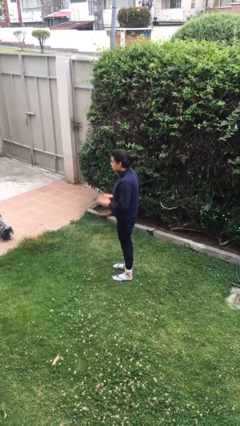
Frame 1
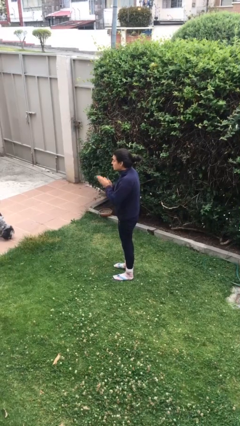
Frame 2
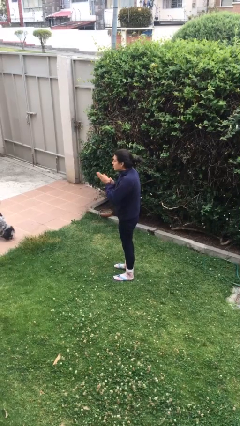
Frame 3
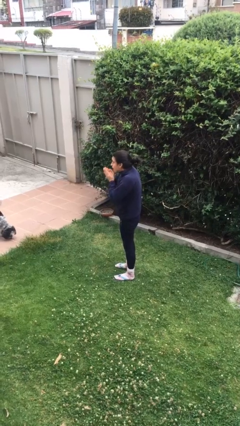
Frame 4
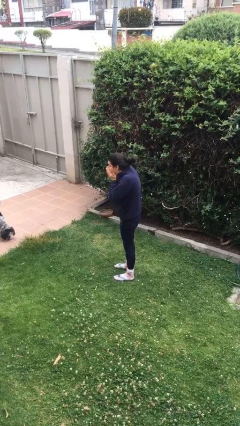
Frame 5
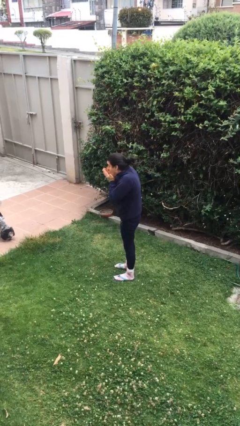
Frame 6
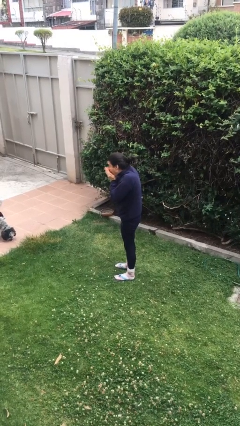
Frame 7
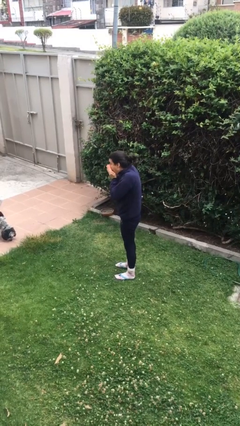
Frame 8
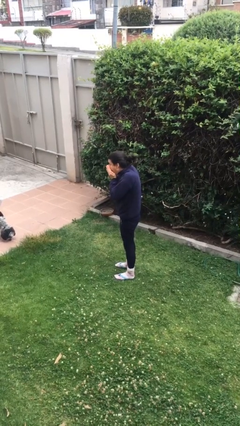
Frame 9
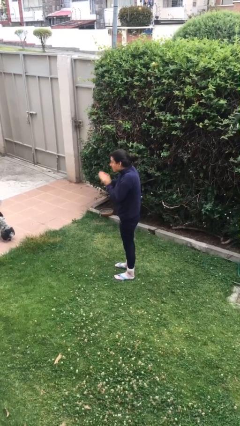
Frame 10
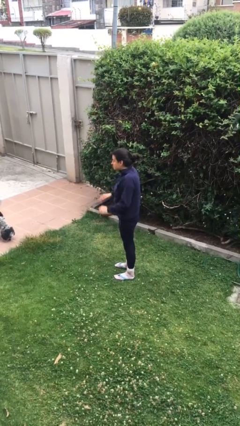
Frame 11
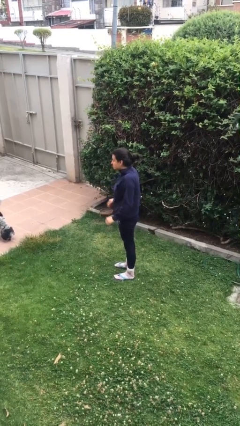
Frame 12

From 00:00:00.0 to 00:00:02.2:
person blows into hands

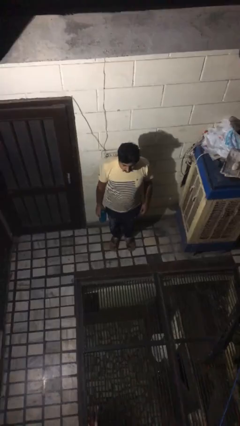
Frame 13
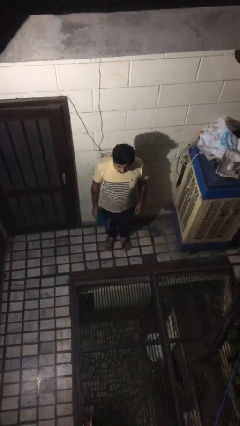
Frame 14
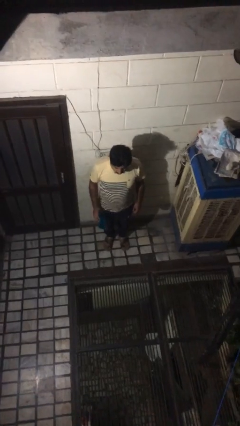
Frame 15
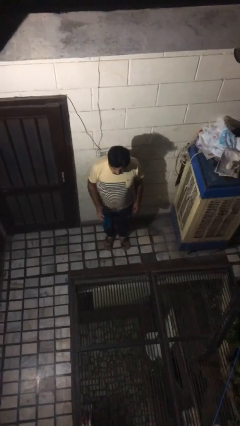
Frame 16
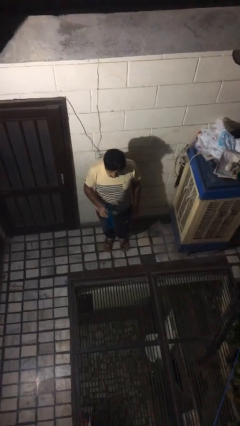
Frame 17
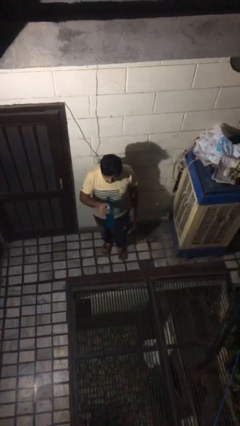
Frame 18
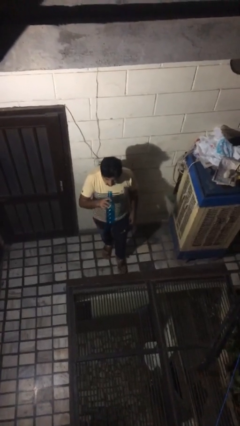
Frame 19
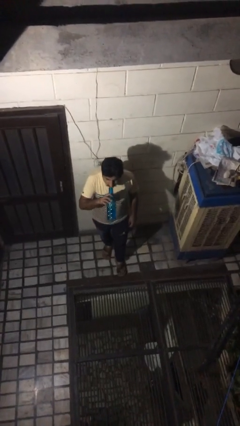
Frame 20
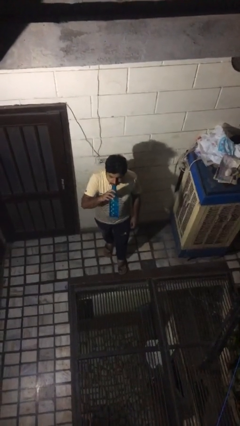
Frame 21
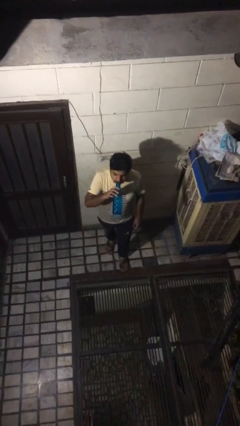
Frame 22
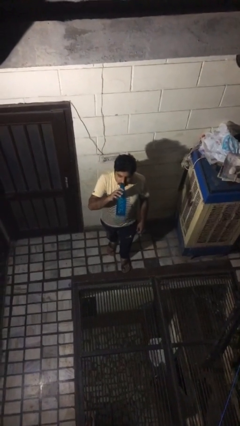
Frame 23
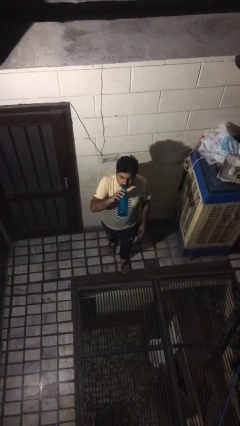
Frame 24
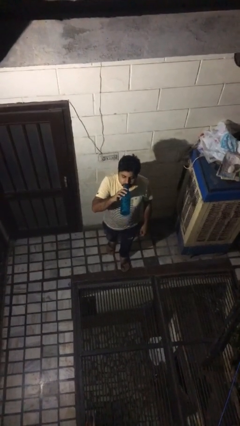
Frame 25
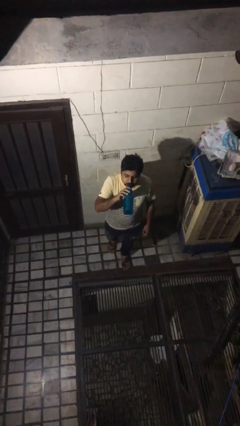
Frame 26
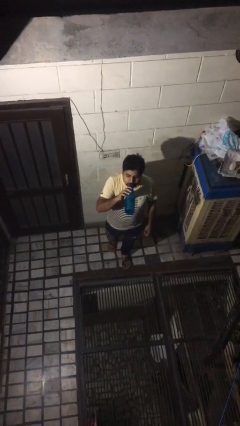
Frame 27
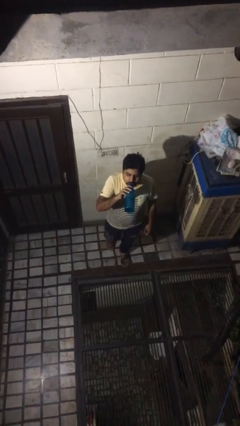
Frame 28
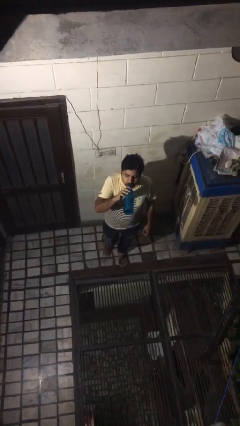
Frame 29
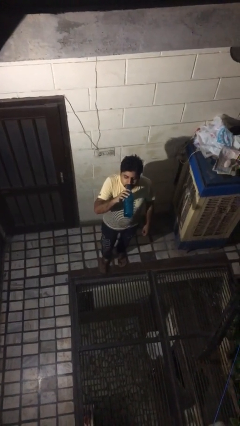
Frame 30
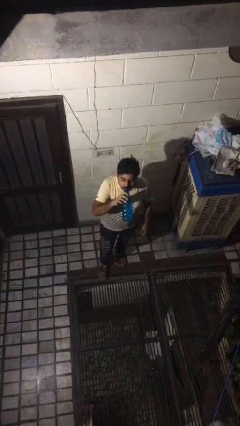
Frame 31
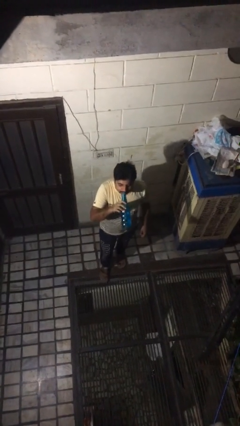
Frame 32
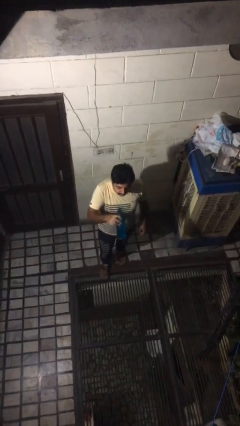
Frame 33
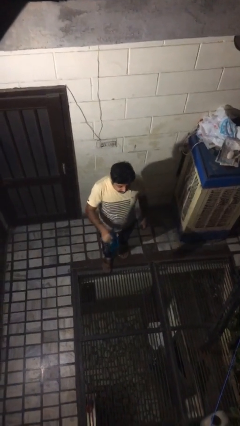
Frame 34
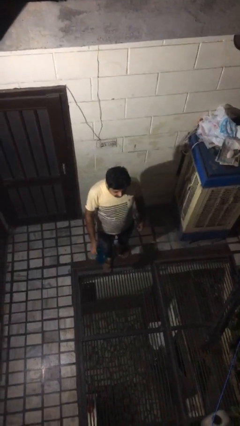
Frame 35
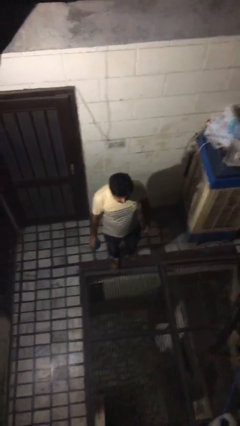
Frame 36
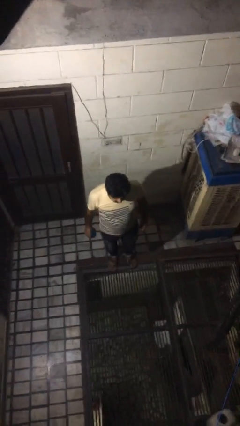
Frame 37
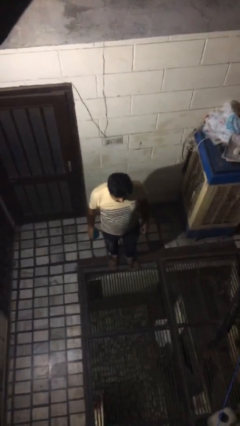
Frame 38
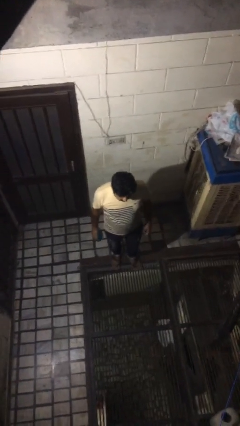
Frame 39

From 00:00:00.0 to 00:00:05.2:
person drinks from bottle

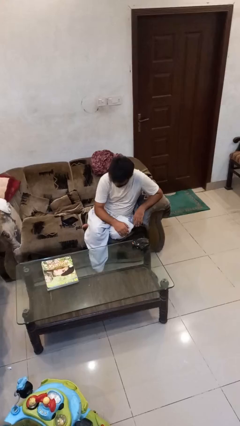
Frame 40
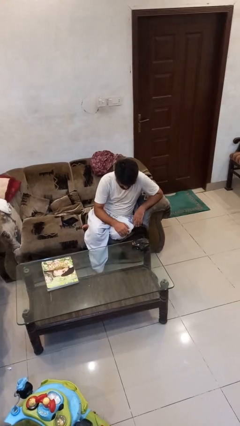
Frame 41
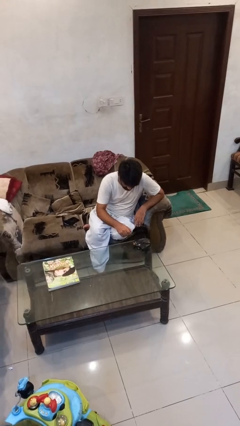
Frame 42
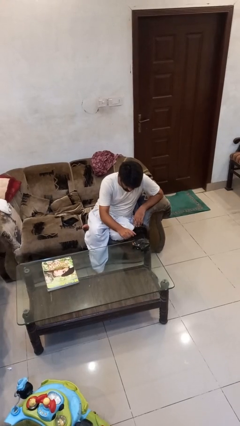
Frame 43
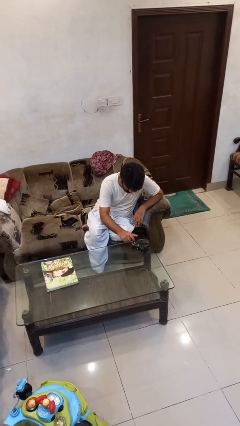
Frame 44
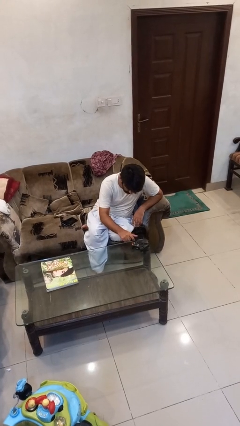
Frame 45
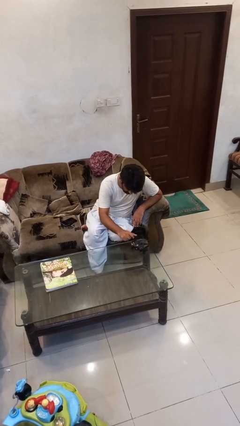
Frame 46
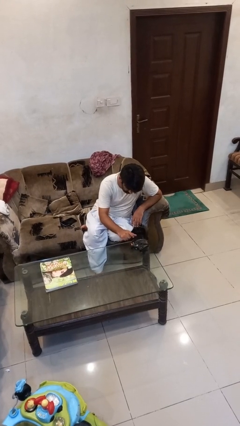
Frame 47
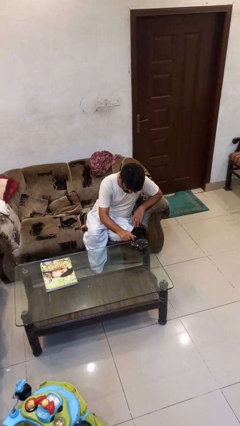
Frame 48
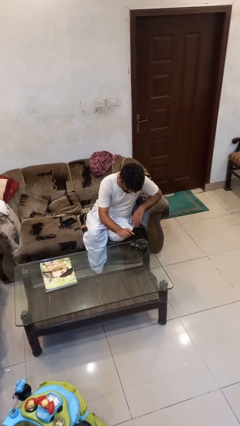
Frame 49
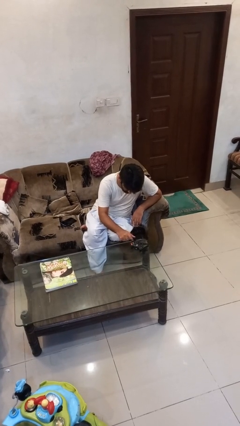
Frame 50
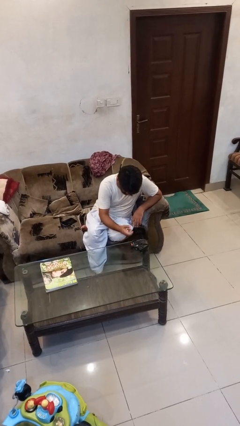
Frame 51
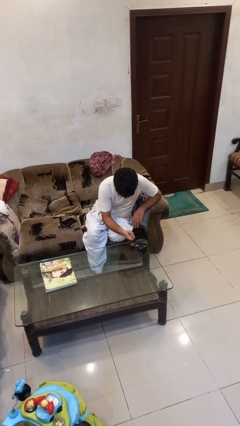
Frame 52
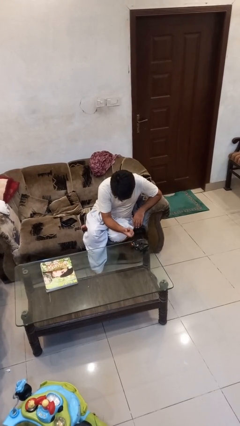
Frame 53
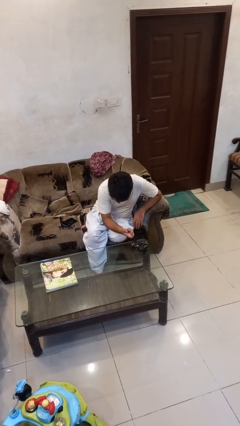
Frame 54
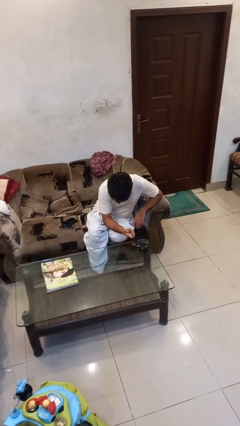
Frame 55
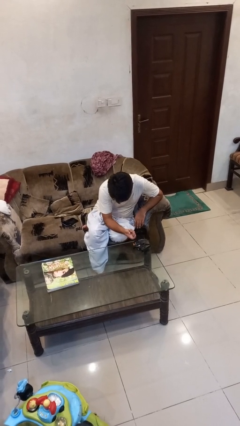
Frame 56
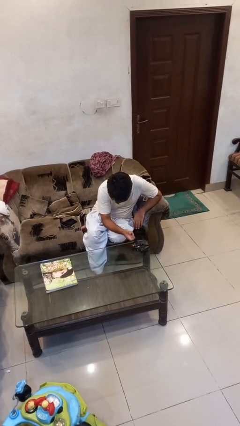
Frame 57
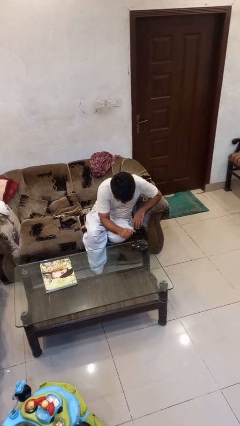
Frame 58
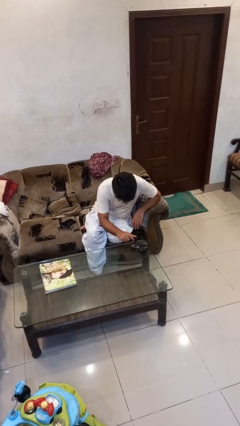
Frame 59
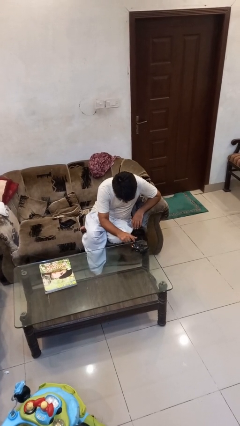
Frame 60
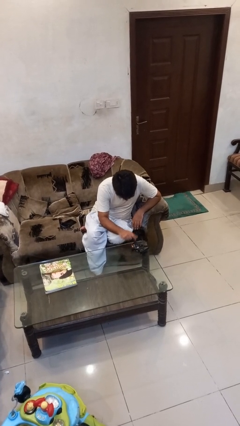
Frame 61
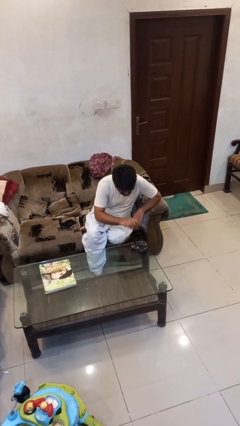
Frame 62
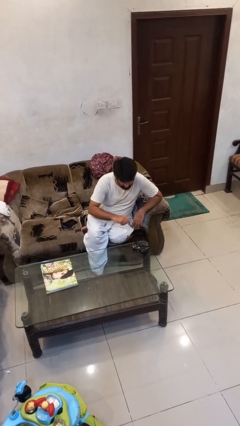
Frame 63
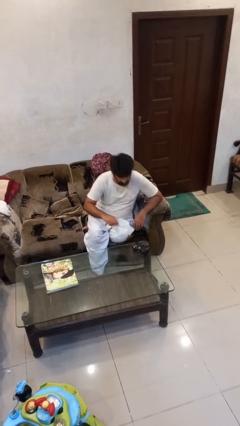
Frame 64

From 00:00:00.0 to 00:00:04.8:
person taps object with finger

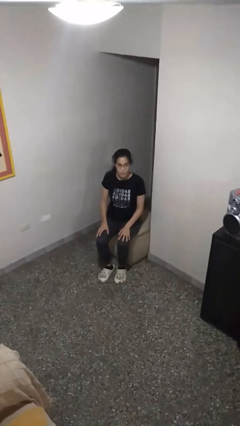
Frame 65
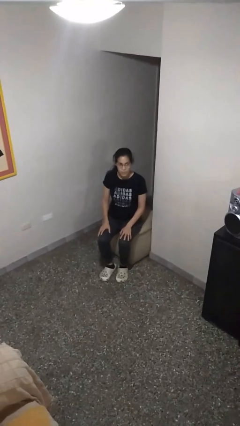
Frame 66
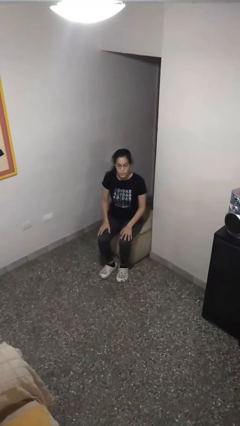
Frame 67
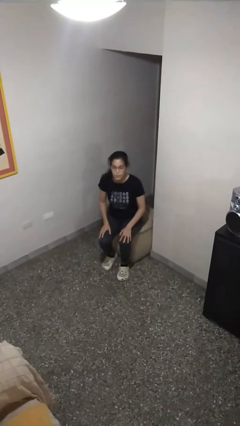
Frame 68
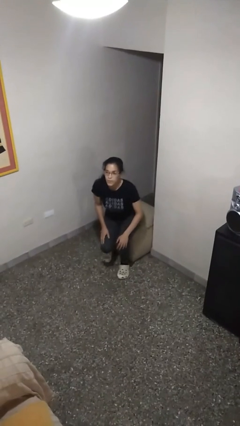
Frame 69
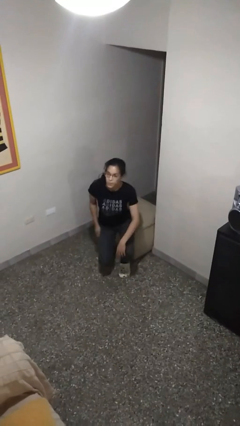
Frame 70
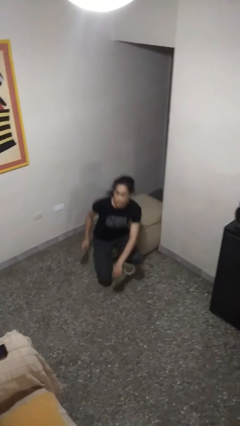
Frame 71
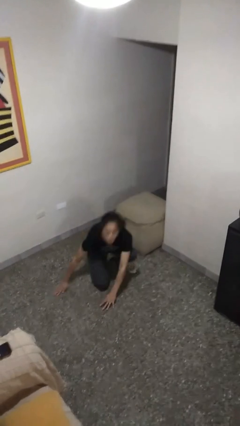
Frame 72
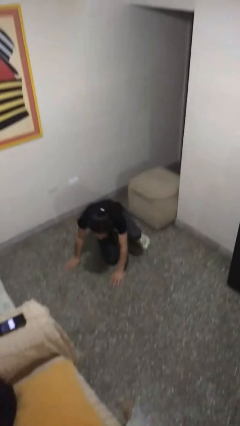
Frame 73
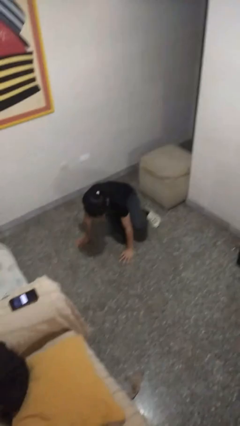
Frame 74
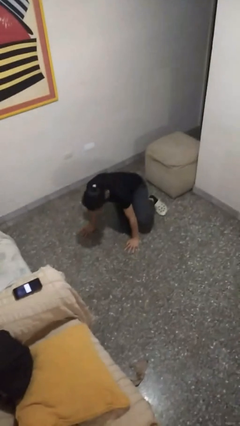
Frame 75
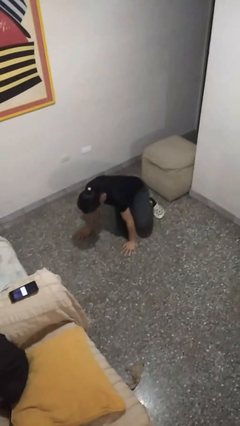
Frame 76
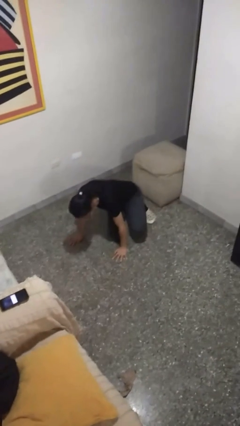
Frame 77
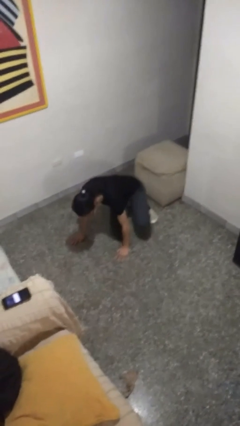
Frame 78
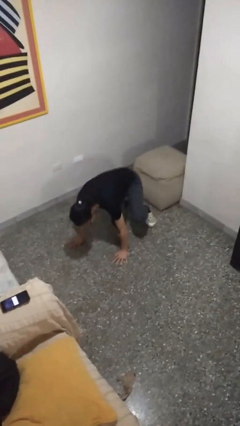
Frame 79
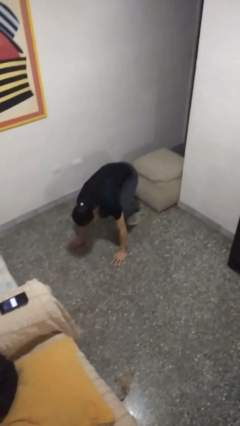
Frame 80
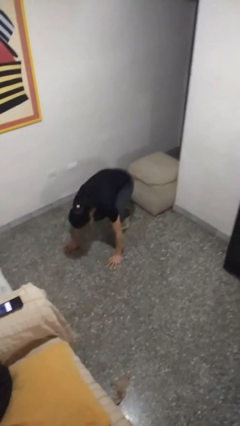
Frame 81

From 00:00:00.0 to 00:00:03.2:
person falls from chair

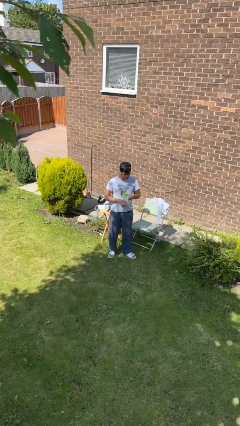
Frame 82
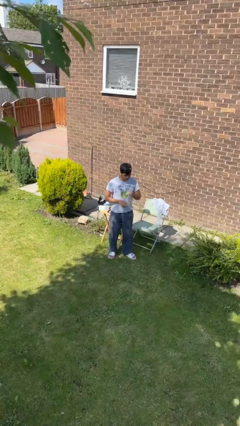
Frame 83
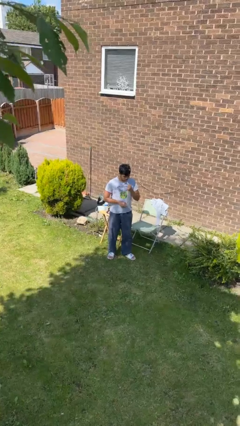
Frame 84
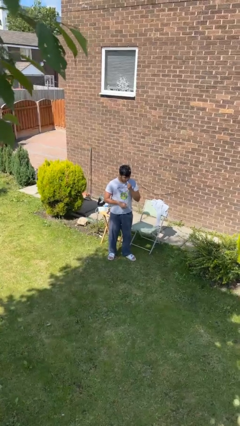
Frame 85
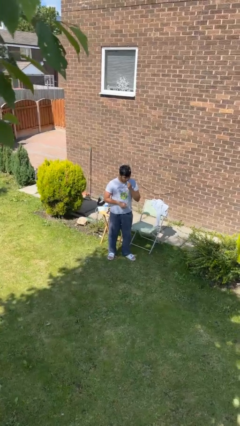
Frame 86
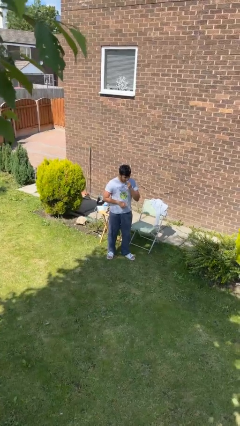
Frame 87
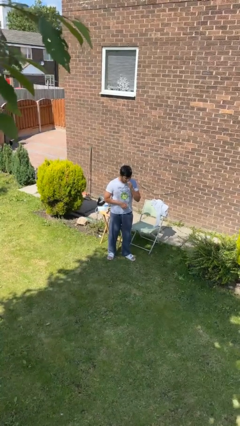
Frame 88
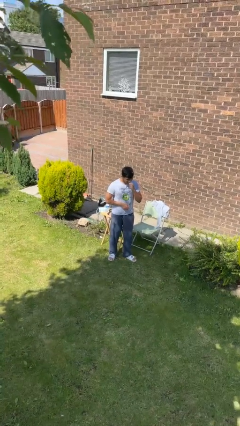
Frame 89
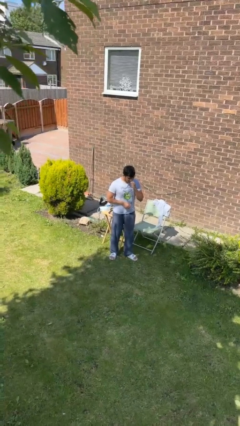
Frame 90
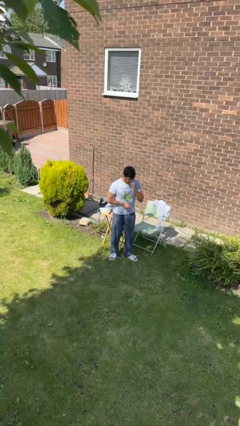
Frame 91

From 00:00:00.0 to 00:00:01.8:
person flosses

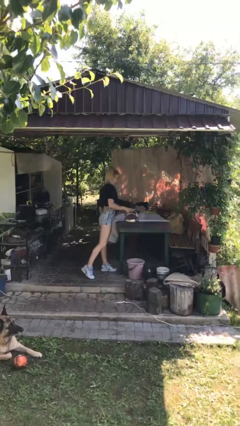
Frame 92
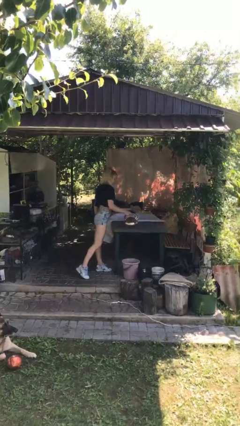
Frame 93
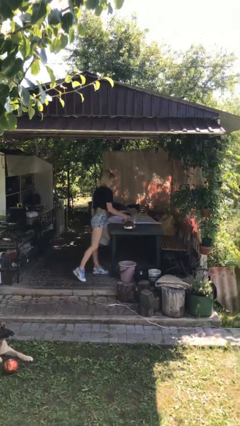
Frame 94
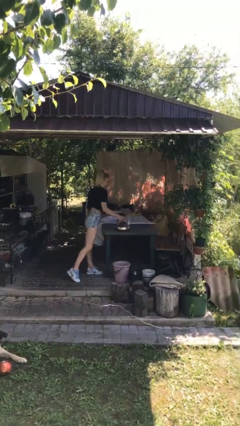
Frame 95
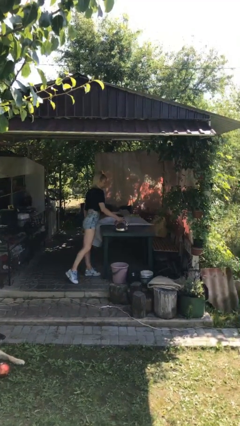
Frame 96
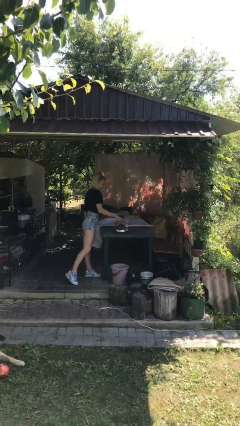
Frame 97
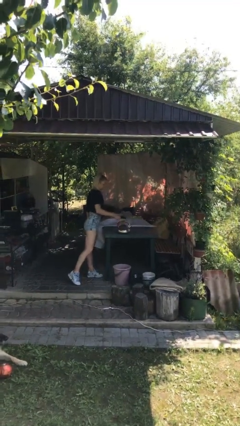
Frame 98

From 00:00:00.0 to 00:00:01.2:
person puts down object on table
